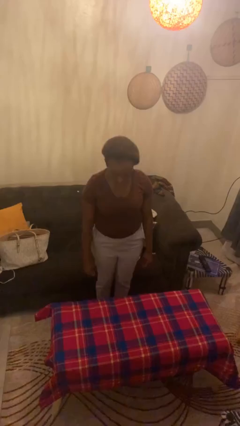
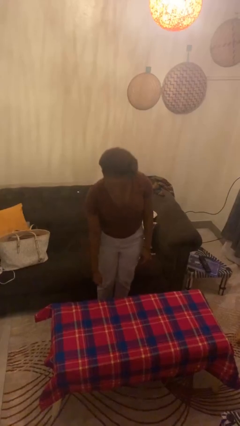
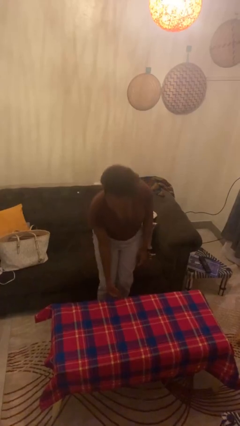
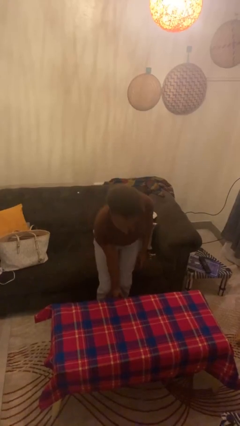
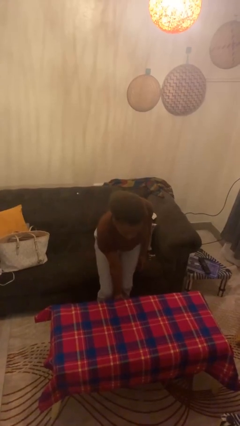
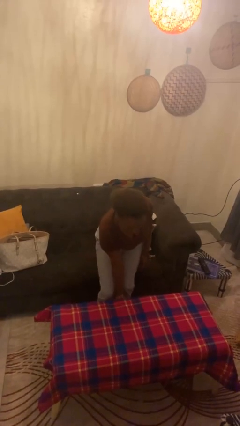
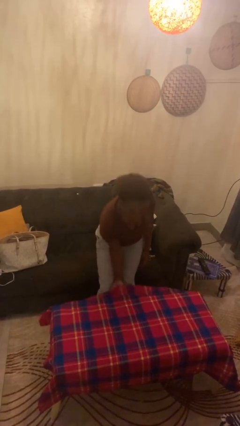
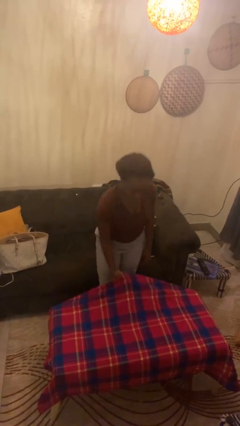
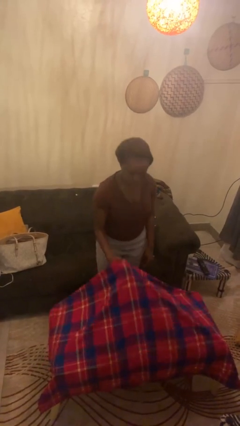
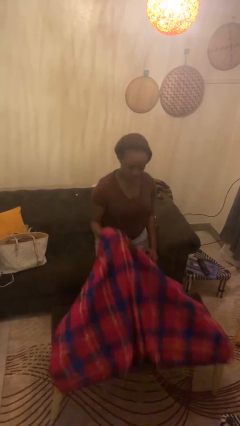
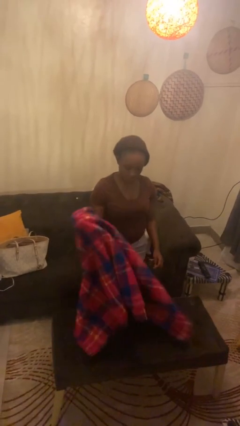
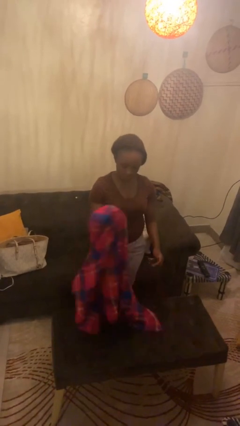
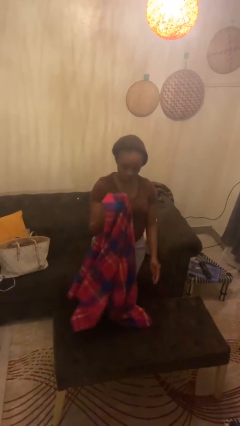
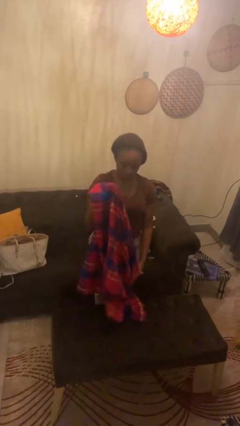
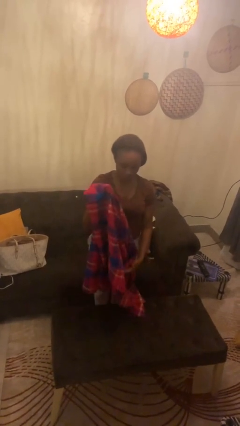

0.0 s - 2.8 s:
person folds tablecloth

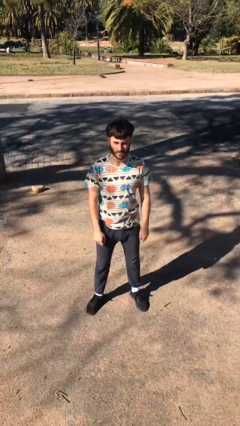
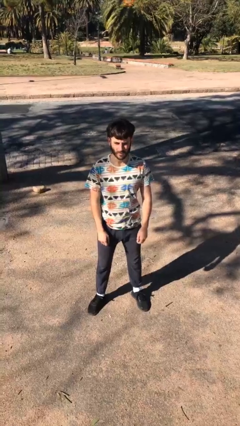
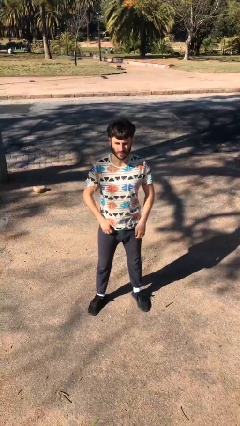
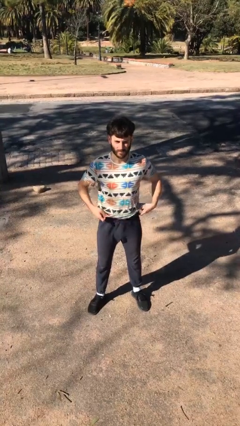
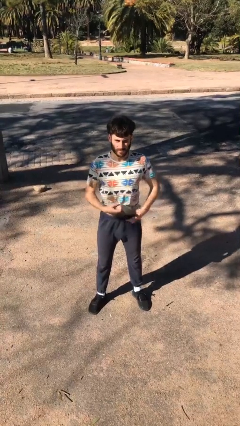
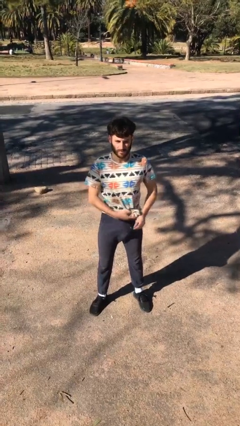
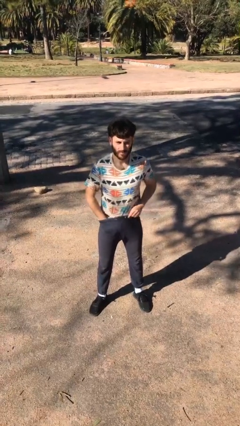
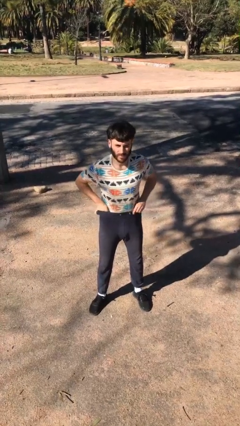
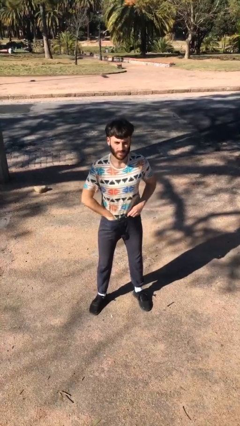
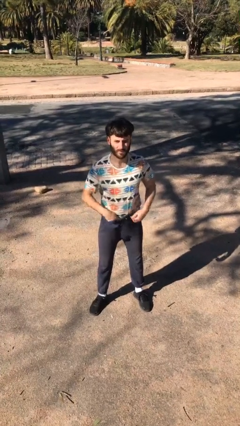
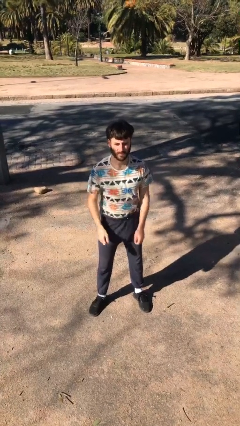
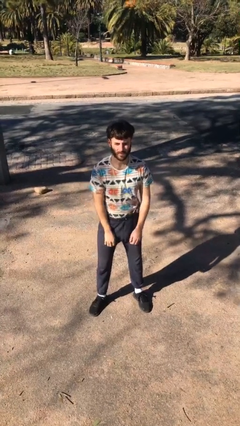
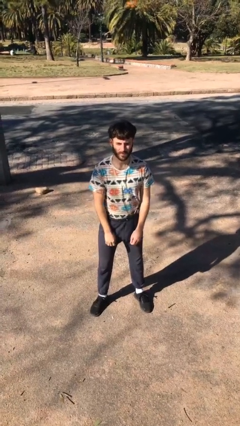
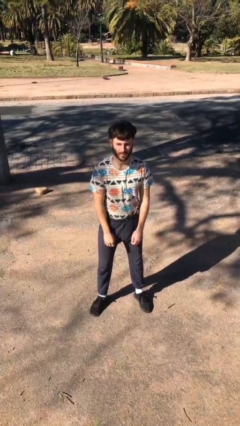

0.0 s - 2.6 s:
person tucks in shirt

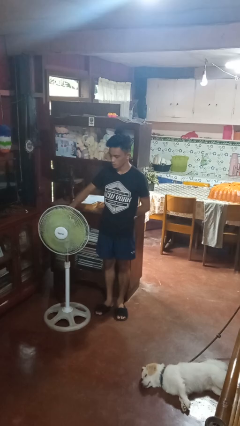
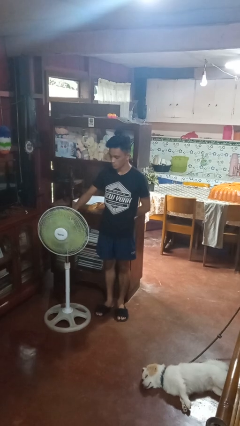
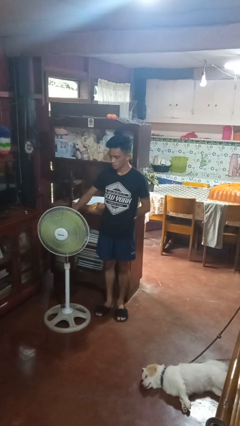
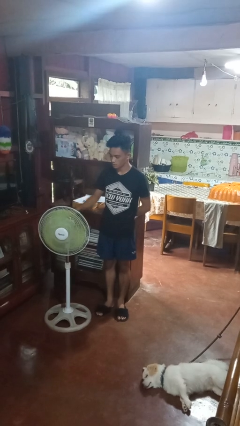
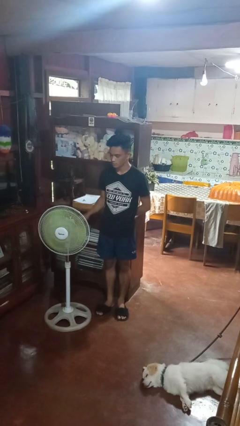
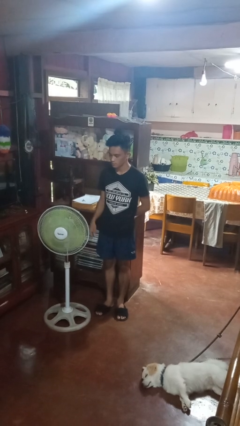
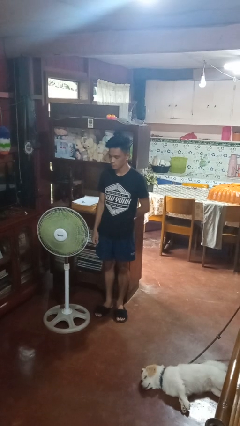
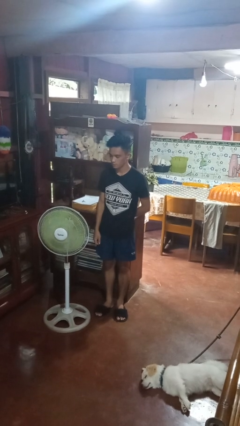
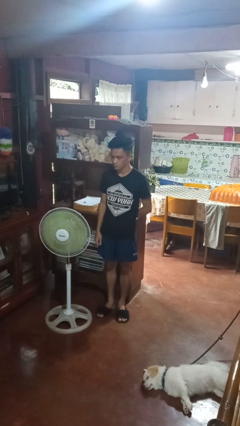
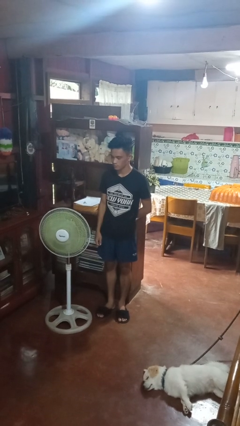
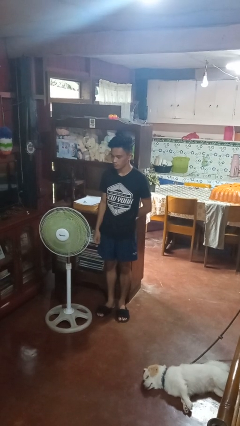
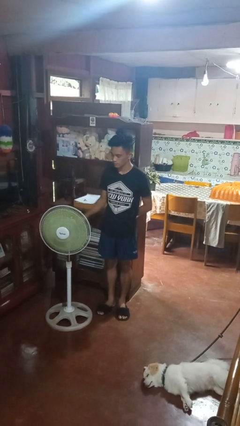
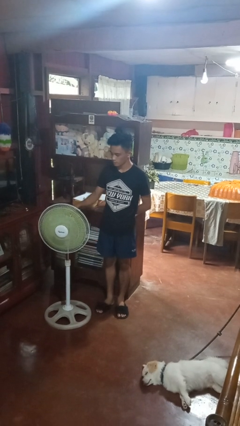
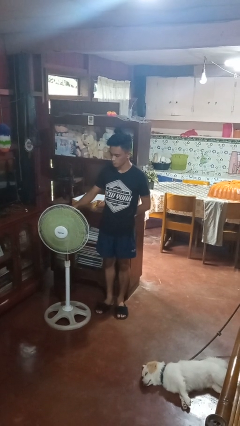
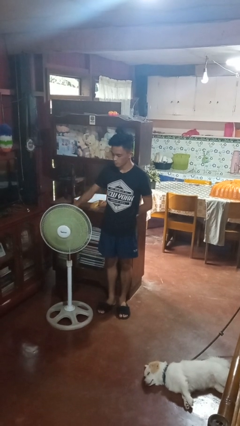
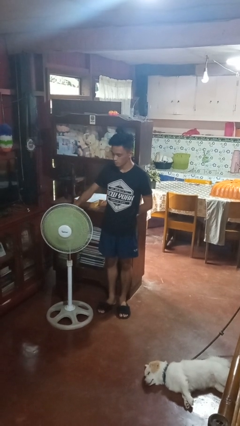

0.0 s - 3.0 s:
person turns on fan

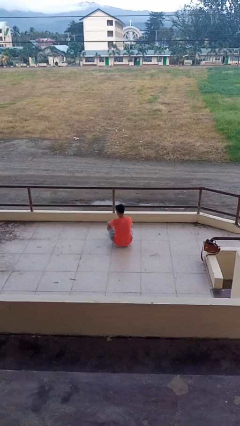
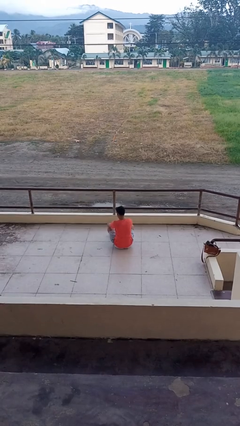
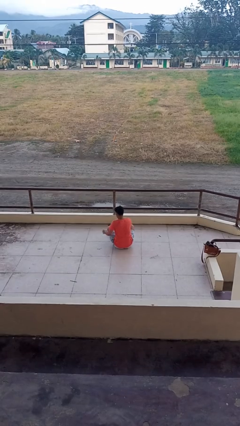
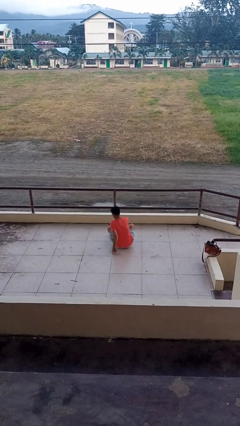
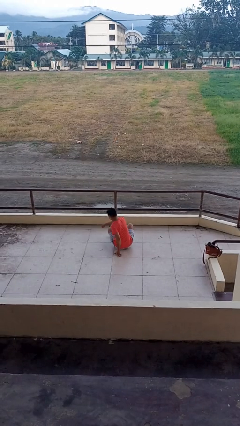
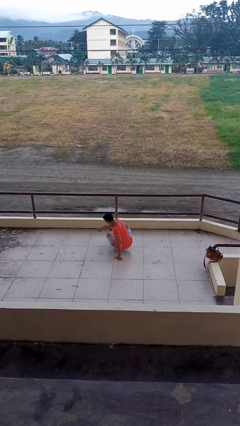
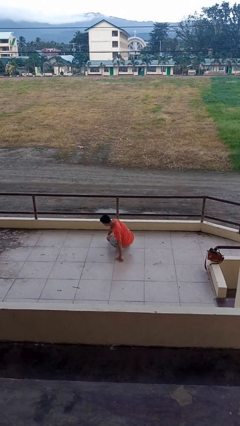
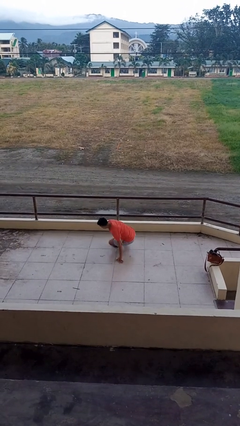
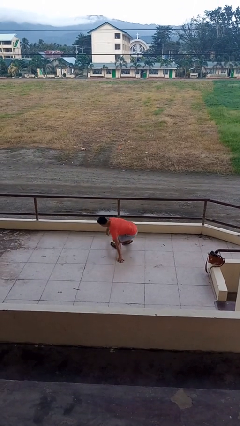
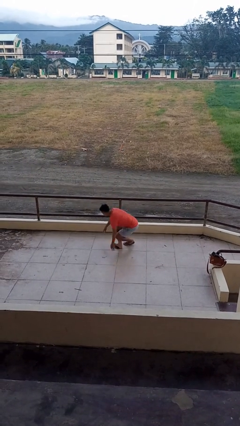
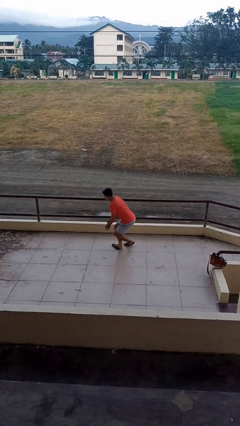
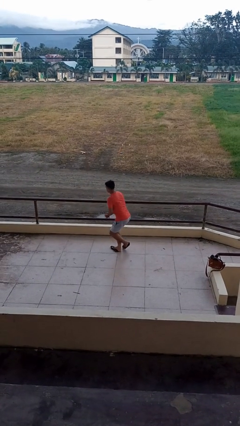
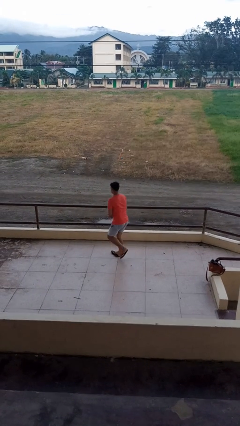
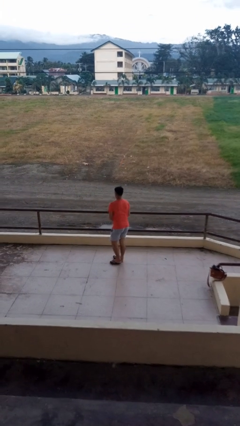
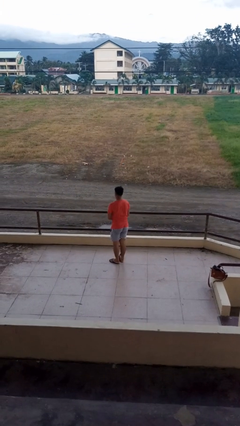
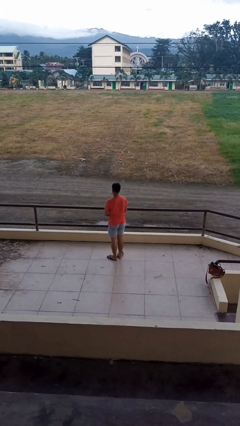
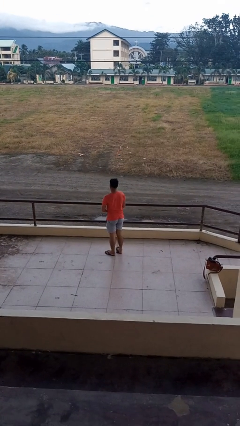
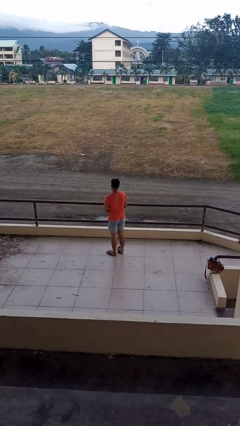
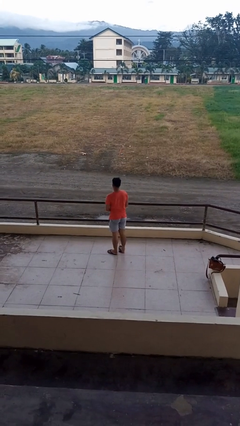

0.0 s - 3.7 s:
person stands up from floor

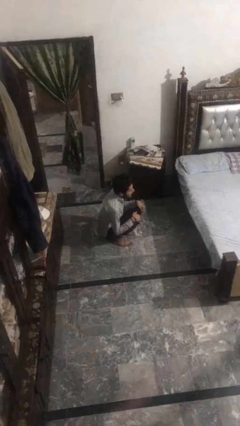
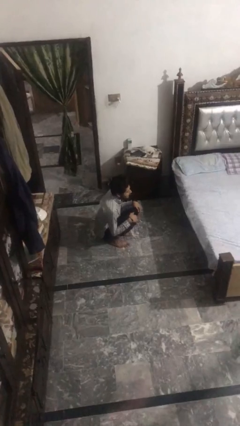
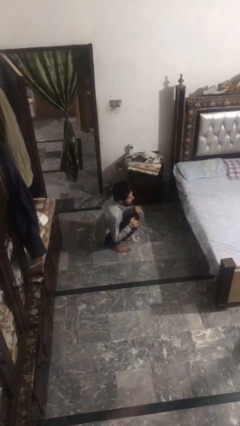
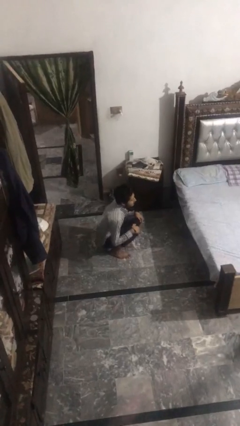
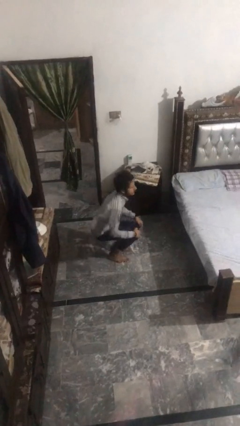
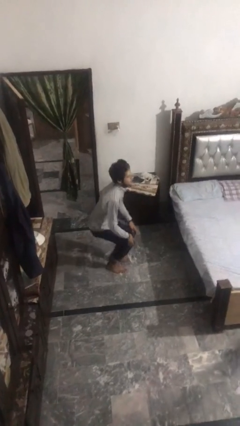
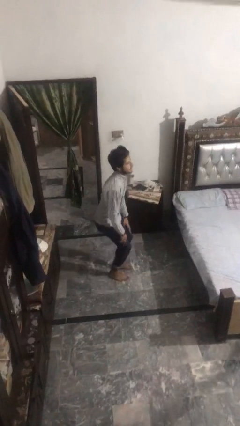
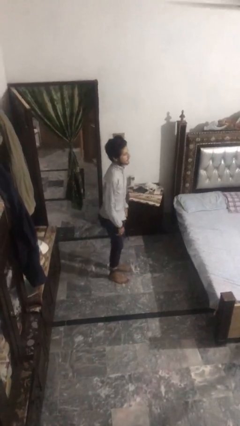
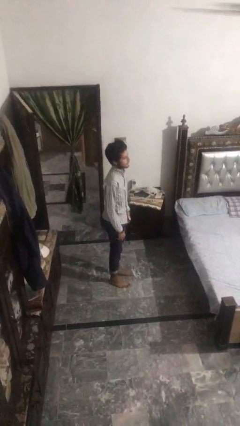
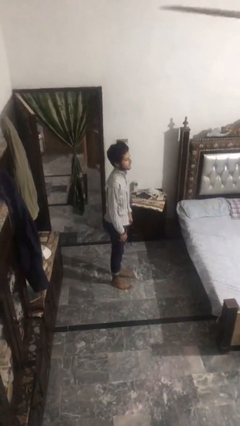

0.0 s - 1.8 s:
person stands up

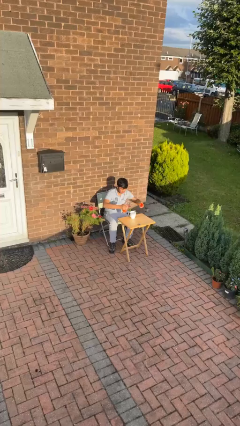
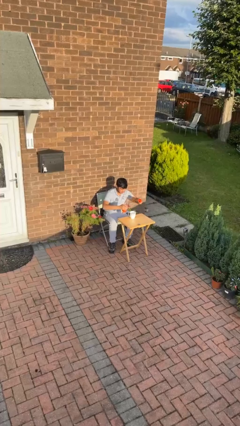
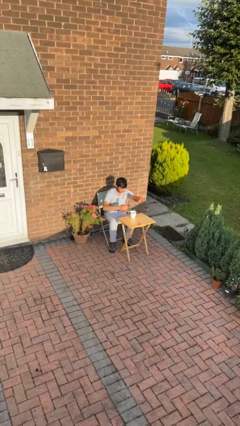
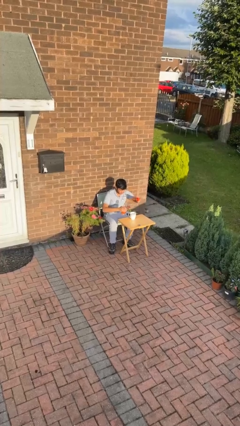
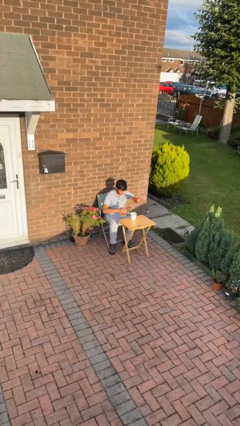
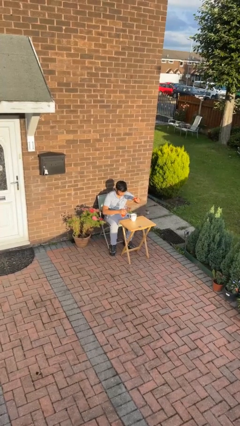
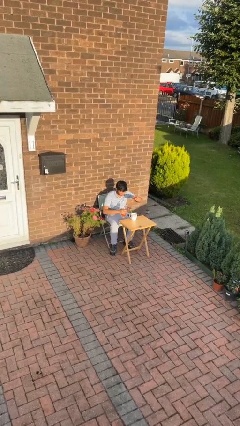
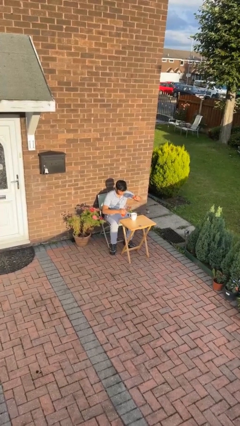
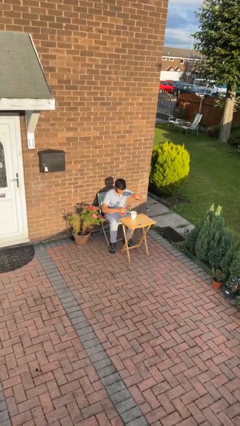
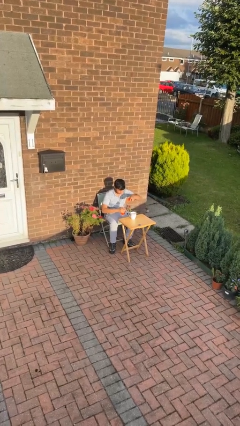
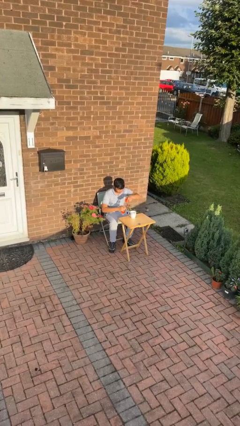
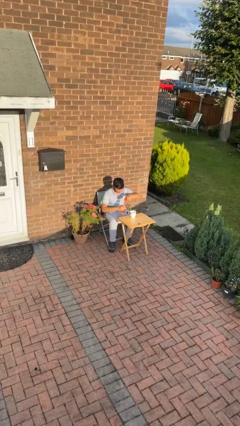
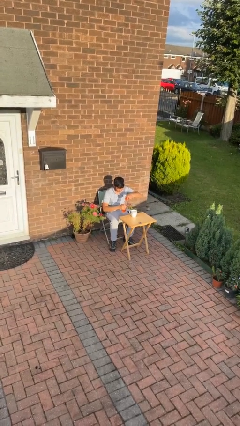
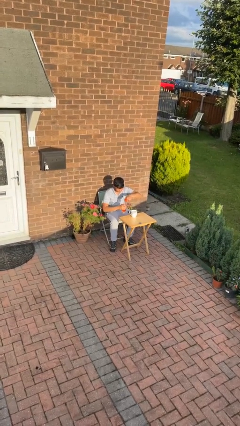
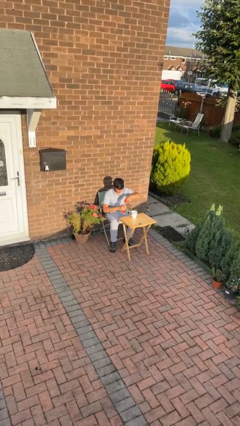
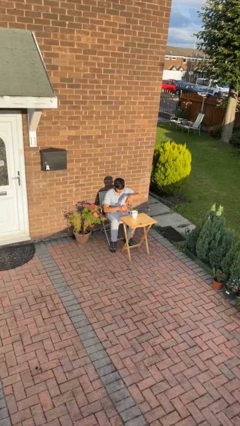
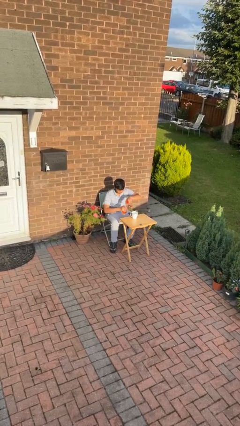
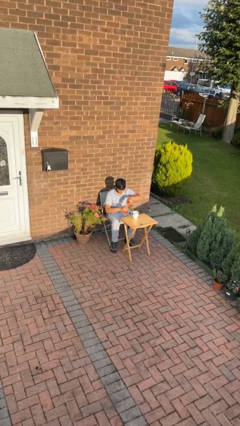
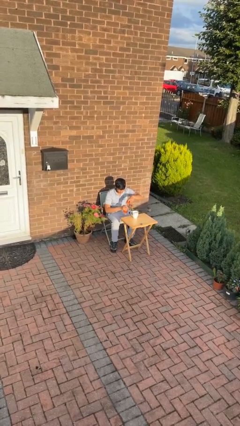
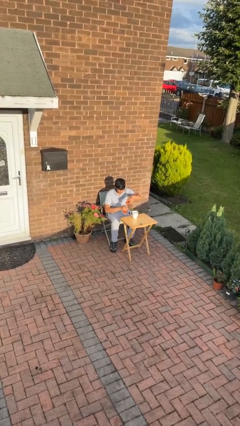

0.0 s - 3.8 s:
person screws lid to bottle
